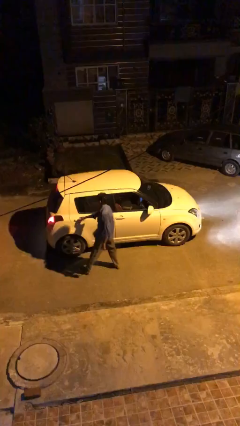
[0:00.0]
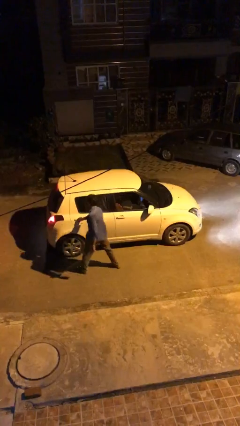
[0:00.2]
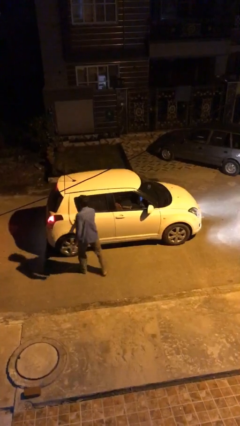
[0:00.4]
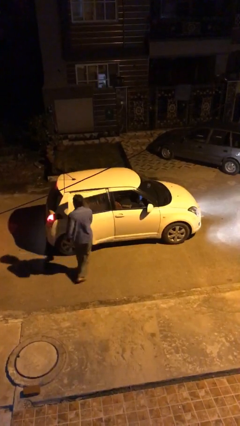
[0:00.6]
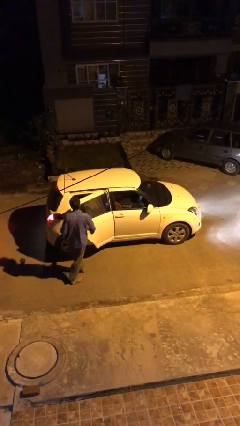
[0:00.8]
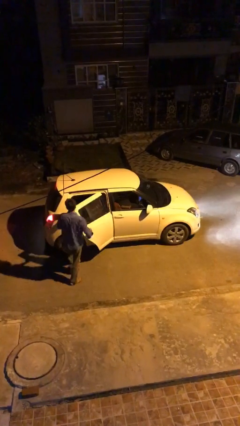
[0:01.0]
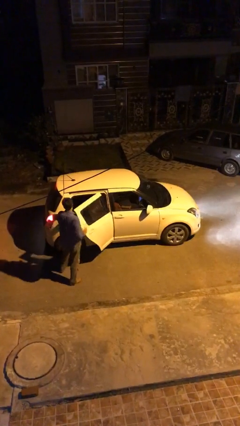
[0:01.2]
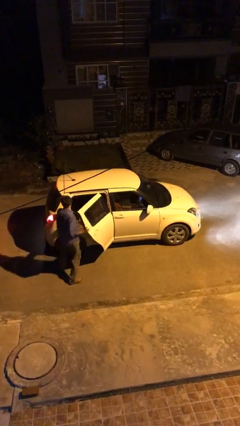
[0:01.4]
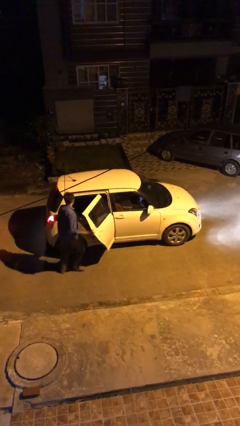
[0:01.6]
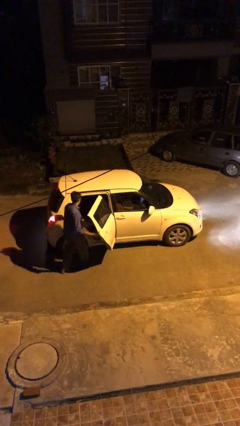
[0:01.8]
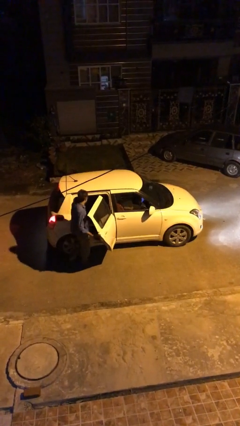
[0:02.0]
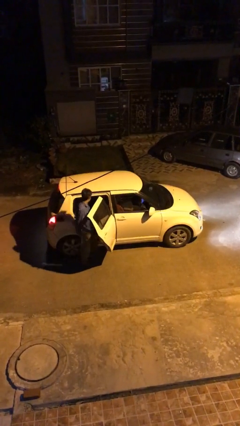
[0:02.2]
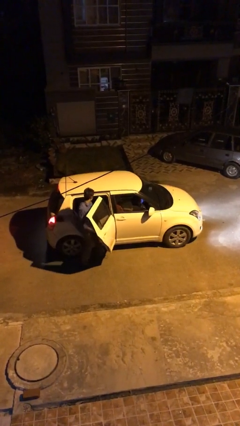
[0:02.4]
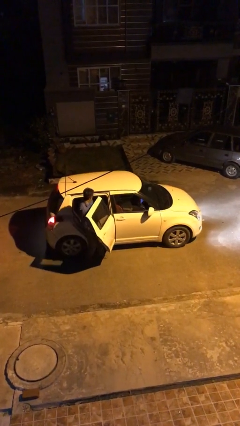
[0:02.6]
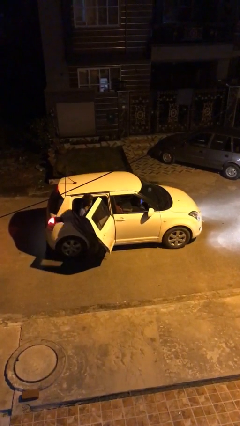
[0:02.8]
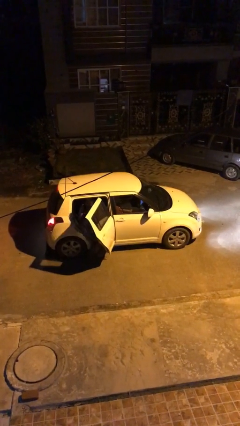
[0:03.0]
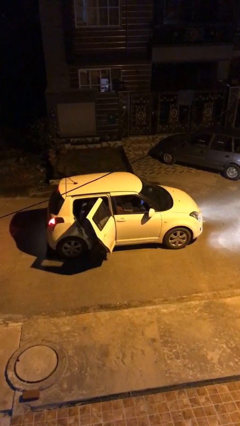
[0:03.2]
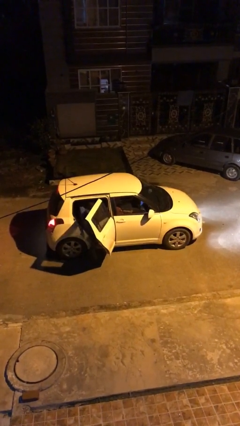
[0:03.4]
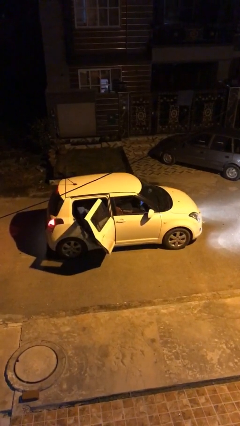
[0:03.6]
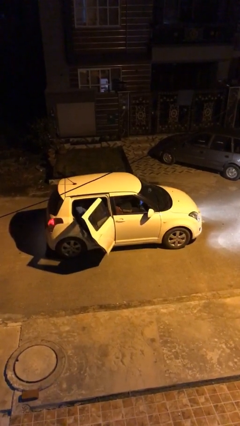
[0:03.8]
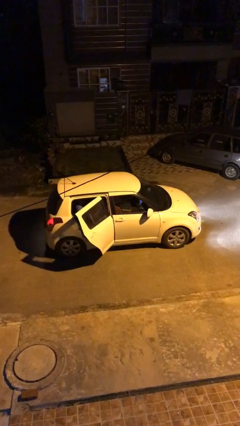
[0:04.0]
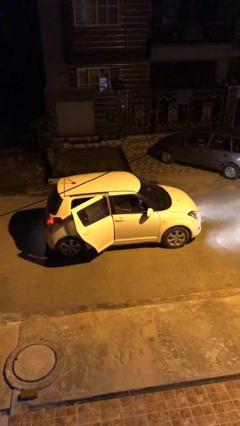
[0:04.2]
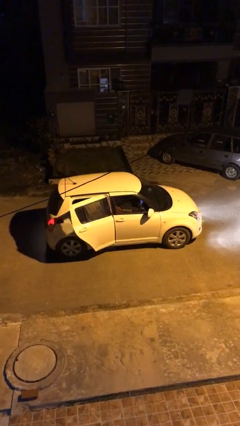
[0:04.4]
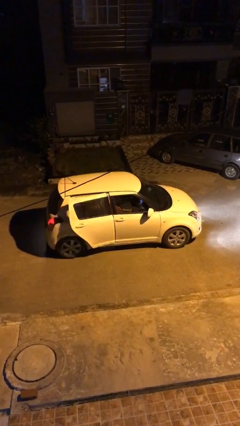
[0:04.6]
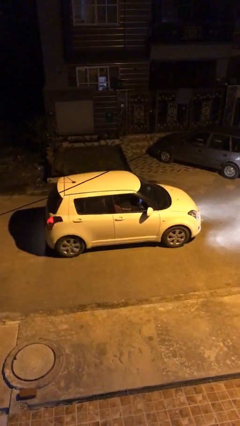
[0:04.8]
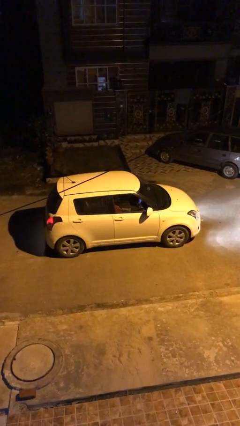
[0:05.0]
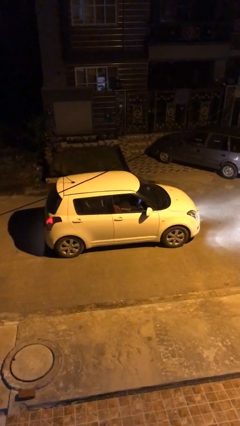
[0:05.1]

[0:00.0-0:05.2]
car picks up person

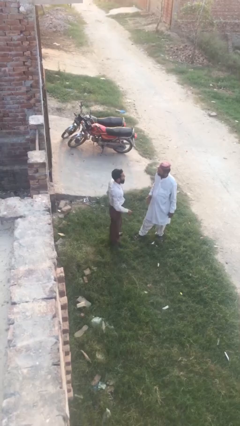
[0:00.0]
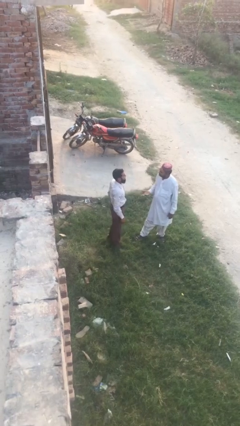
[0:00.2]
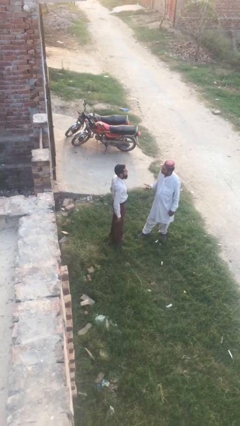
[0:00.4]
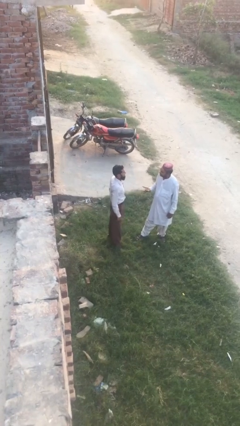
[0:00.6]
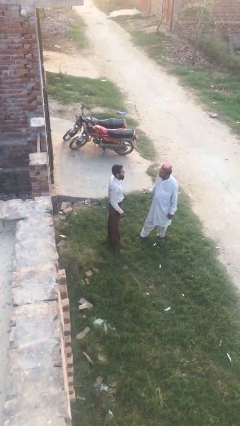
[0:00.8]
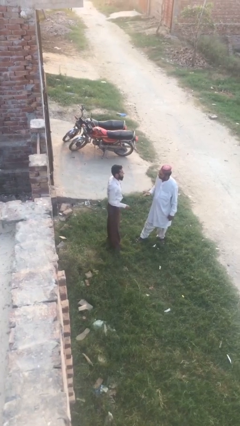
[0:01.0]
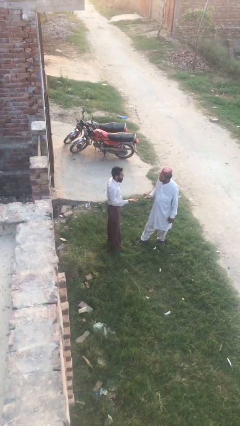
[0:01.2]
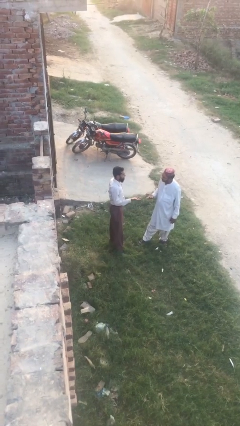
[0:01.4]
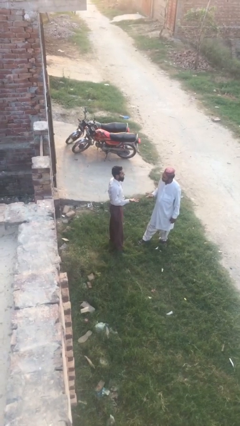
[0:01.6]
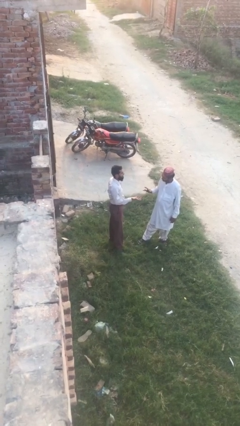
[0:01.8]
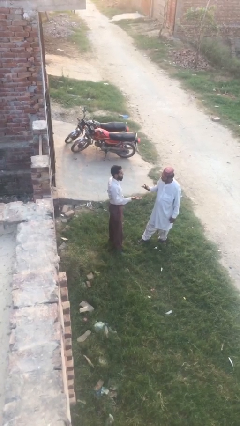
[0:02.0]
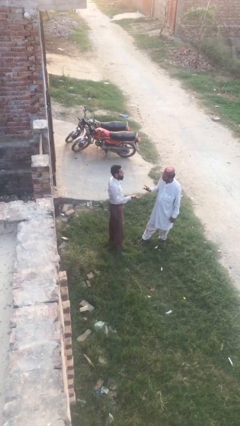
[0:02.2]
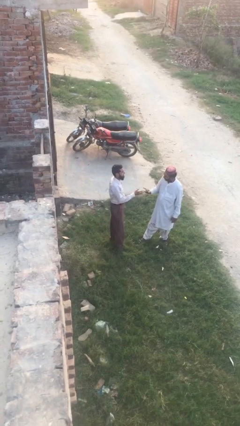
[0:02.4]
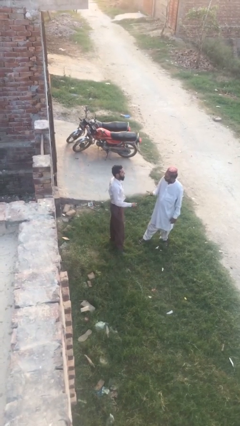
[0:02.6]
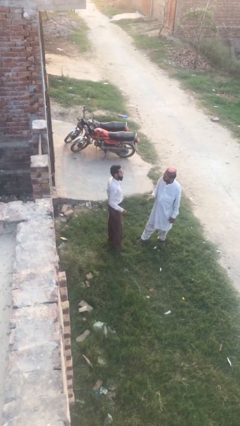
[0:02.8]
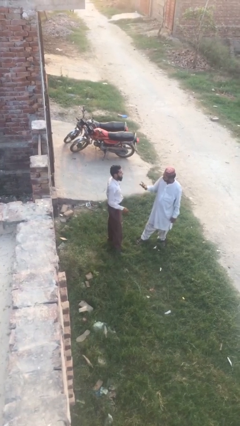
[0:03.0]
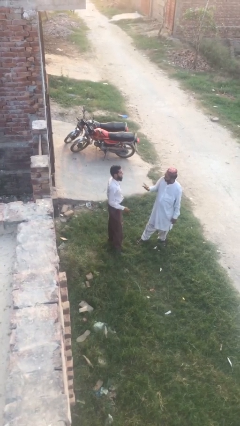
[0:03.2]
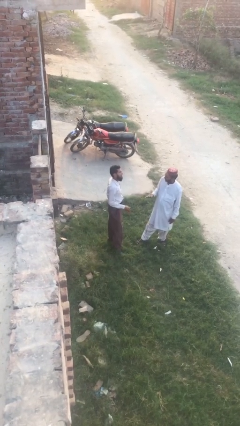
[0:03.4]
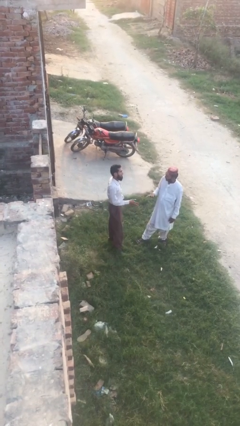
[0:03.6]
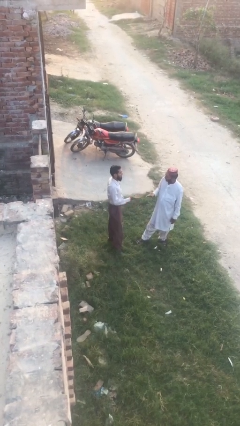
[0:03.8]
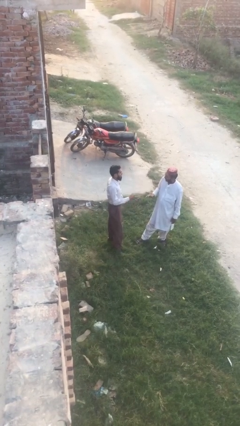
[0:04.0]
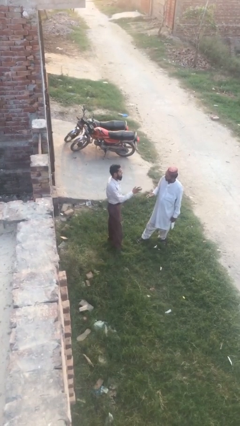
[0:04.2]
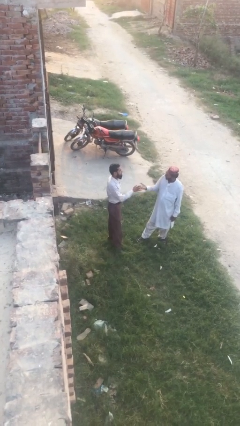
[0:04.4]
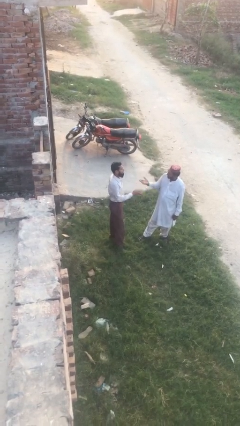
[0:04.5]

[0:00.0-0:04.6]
person talks to person

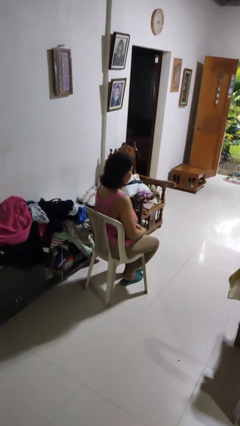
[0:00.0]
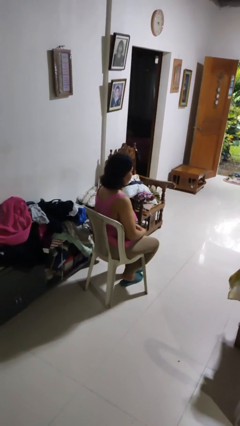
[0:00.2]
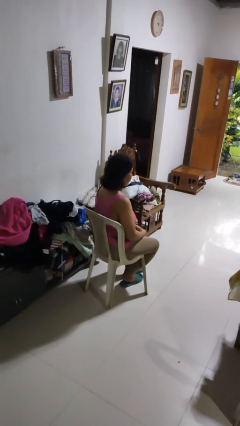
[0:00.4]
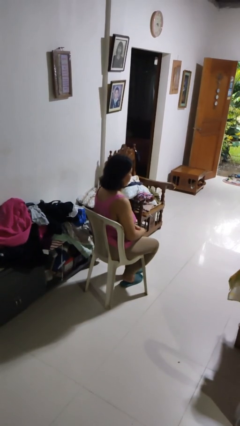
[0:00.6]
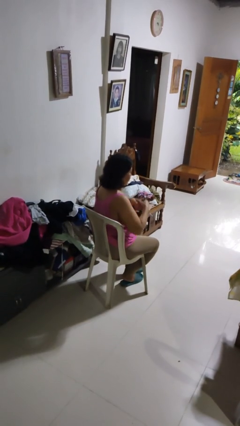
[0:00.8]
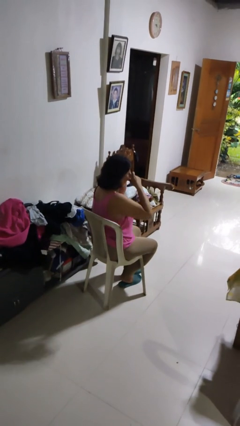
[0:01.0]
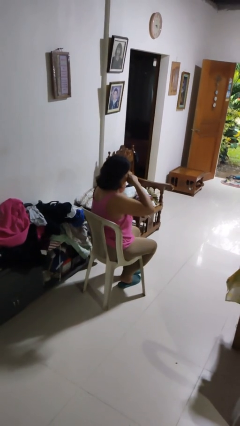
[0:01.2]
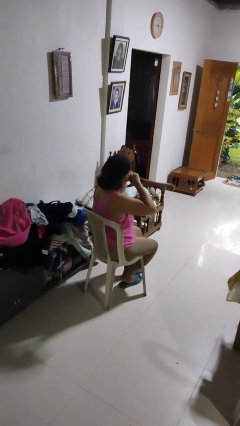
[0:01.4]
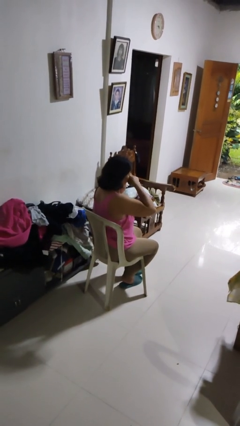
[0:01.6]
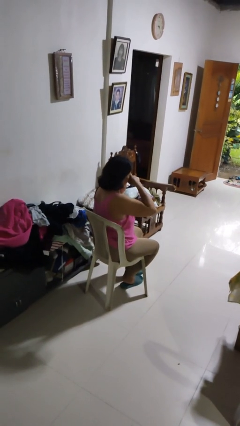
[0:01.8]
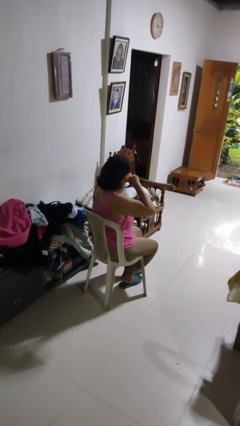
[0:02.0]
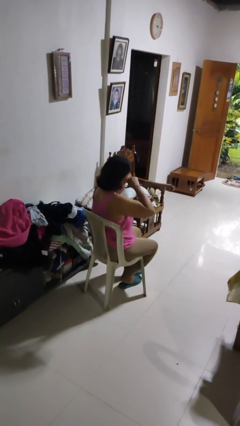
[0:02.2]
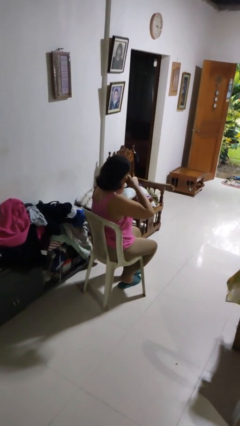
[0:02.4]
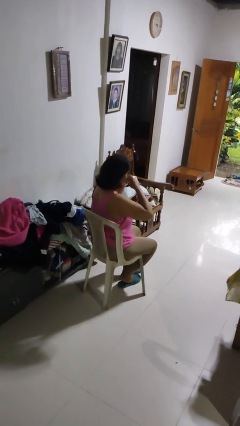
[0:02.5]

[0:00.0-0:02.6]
person rubs eyes

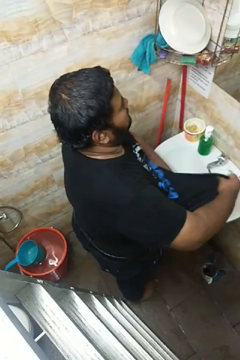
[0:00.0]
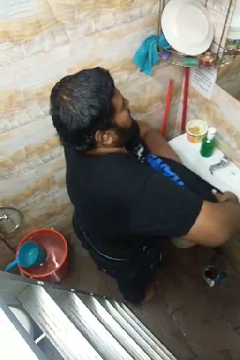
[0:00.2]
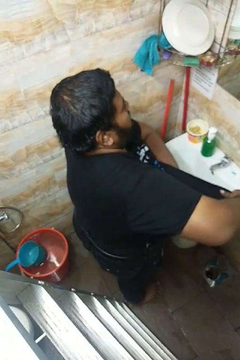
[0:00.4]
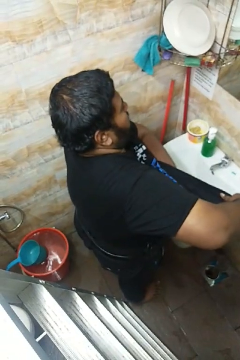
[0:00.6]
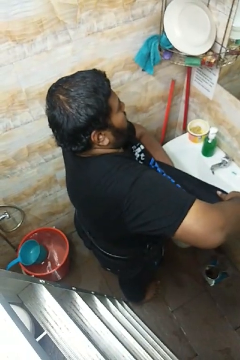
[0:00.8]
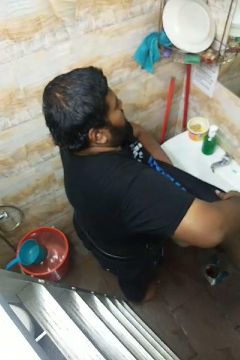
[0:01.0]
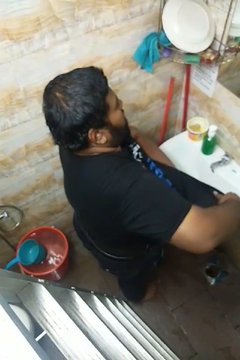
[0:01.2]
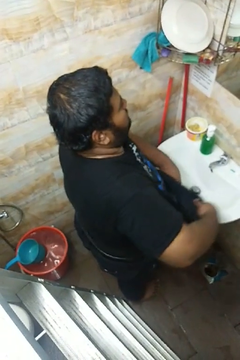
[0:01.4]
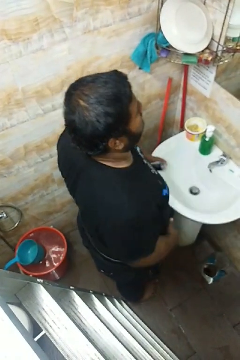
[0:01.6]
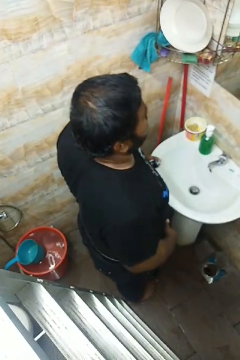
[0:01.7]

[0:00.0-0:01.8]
person applies deodorant

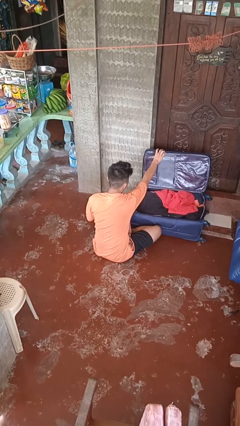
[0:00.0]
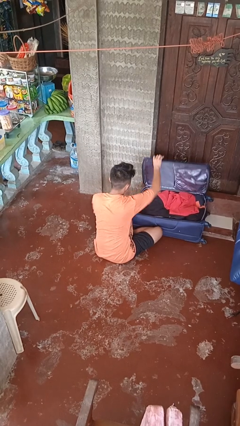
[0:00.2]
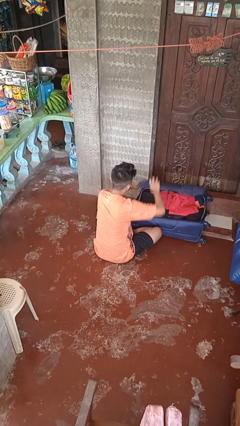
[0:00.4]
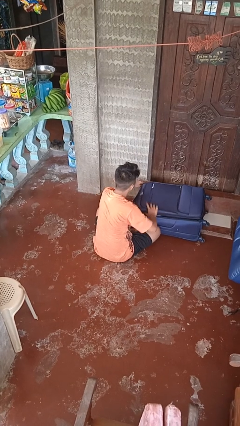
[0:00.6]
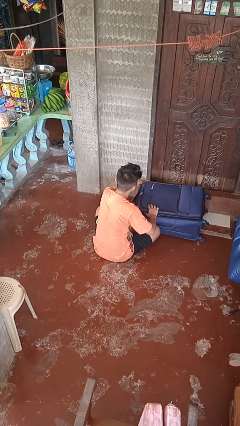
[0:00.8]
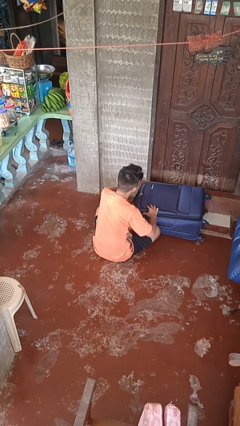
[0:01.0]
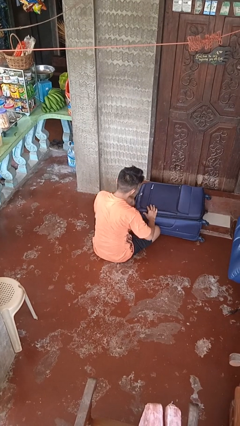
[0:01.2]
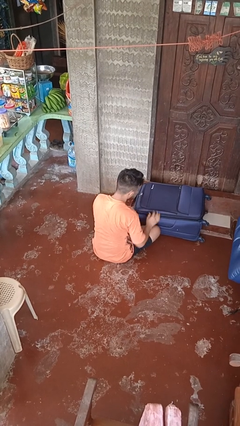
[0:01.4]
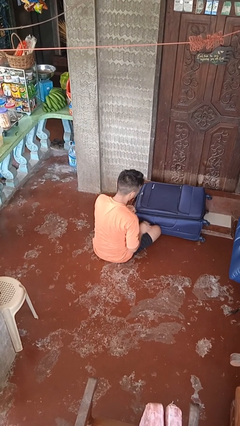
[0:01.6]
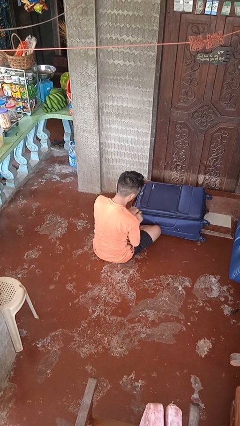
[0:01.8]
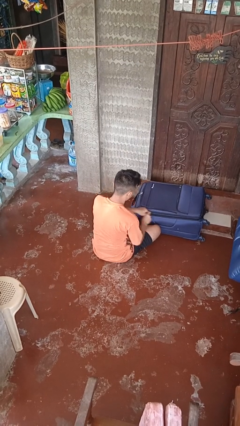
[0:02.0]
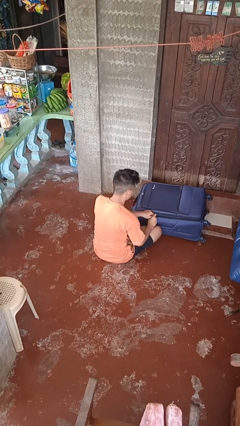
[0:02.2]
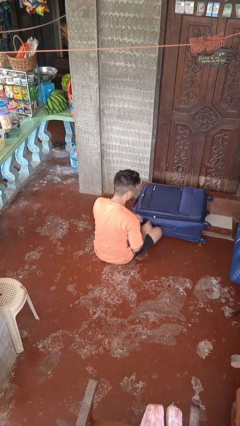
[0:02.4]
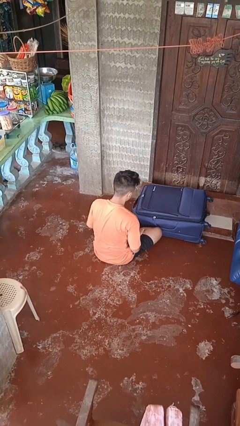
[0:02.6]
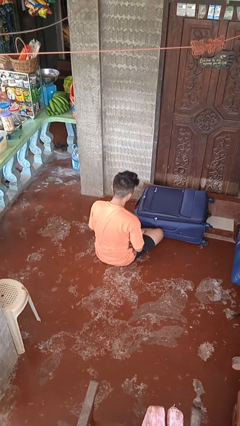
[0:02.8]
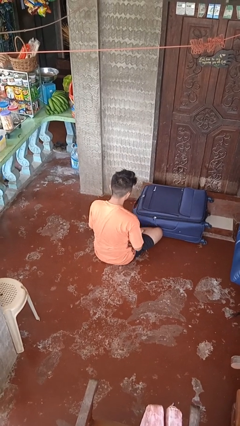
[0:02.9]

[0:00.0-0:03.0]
person closes suitcase

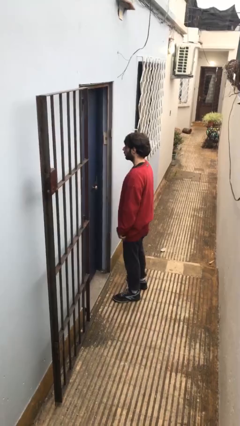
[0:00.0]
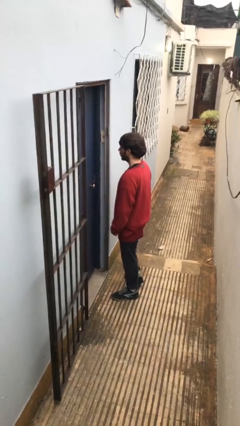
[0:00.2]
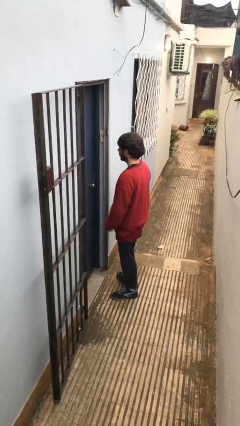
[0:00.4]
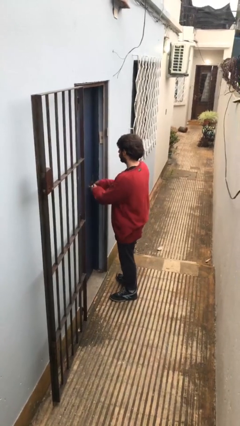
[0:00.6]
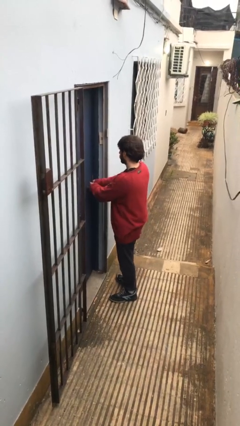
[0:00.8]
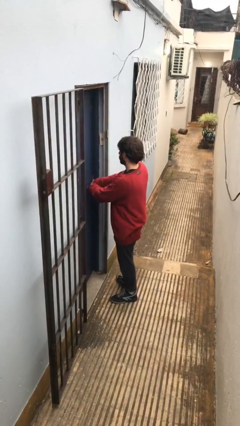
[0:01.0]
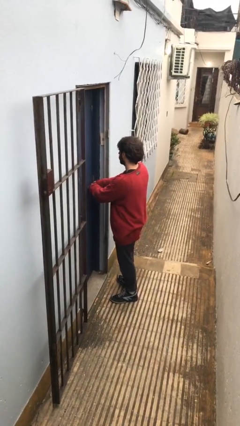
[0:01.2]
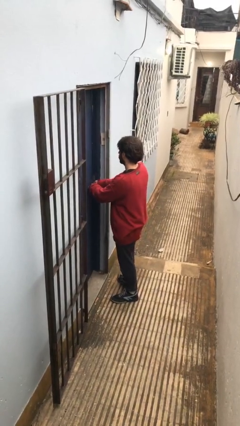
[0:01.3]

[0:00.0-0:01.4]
person unlocks door with keys
